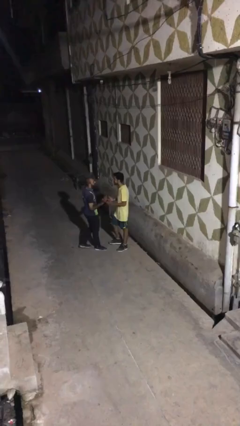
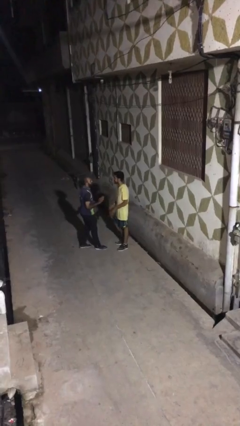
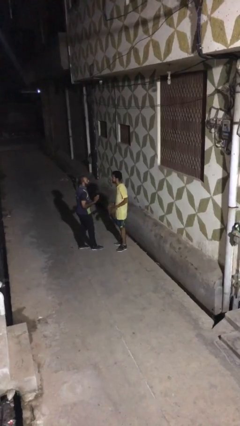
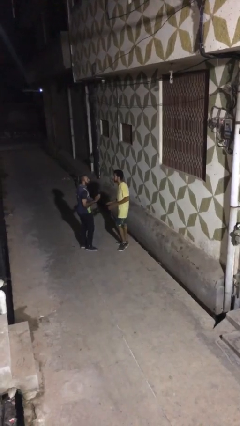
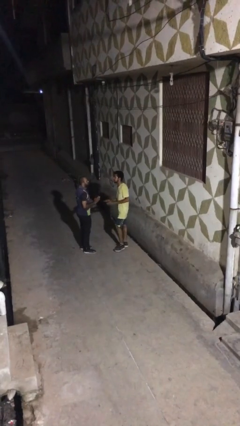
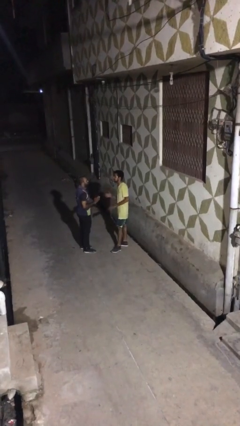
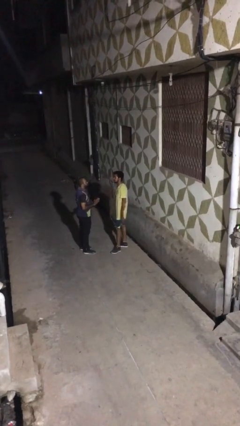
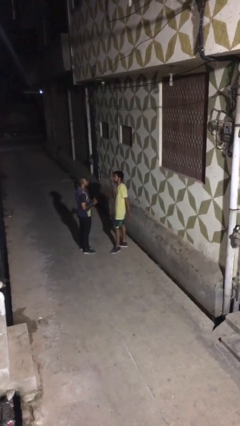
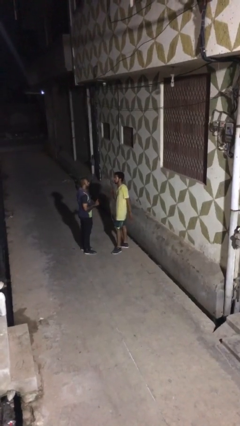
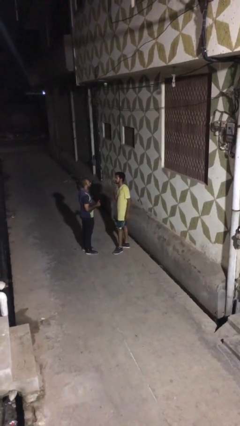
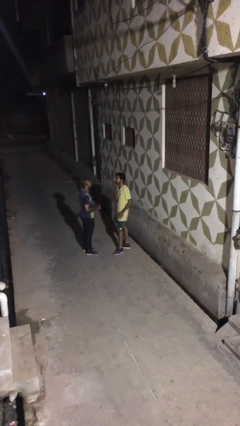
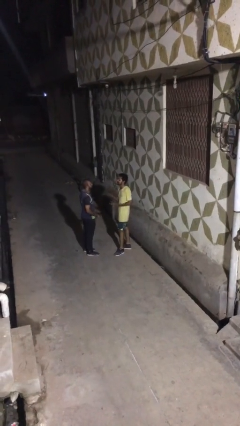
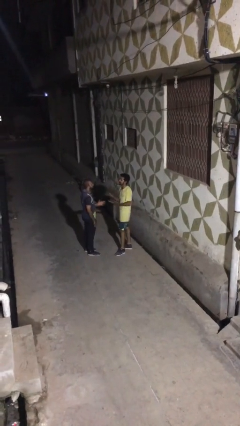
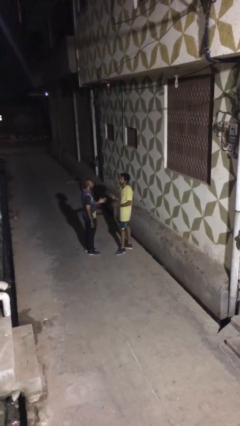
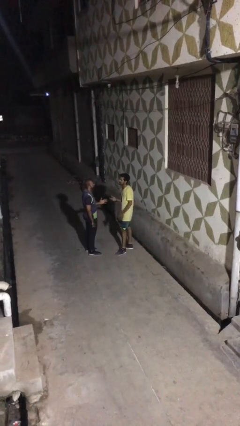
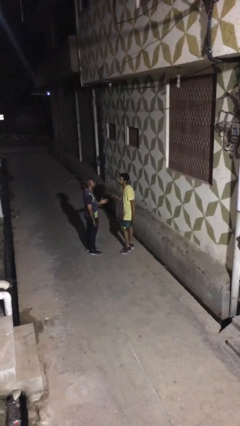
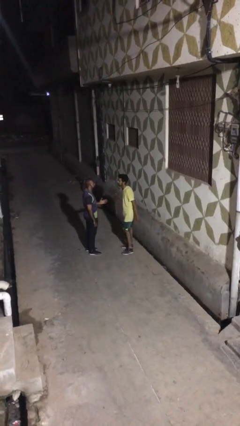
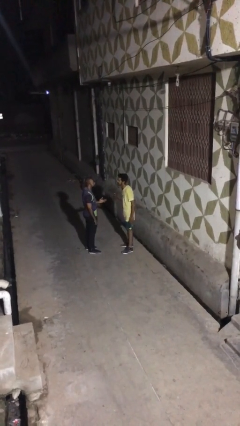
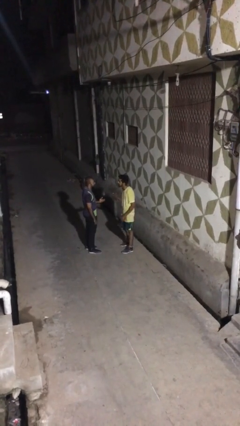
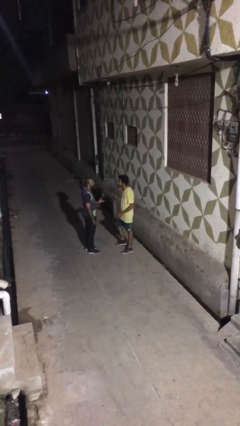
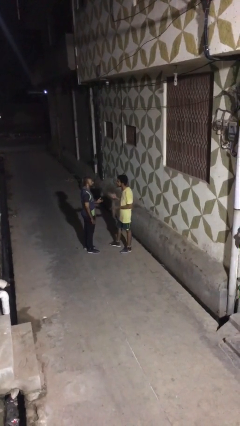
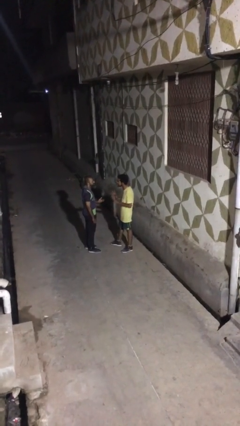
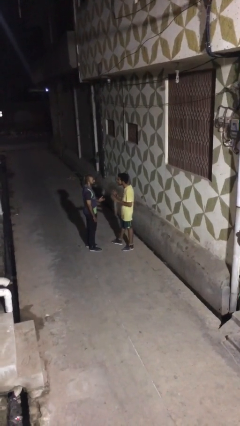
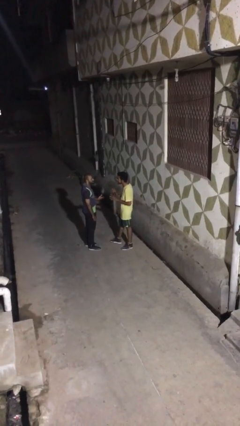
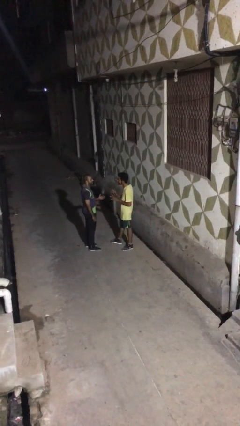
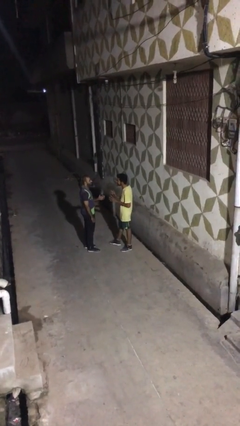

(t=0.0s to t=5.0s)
person talks to person

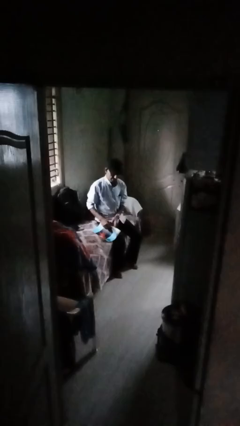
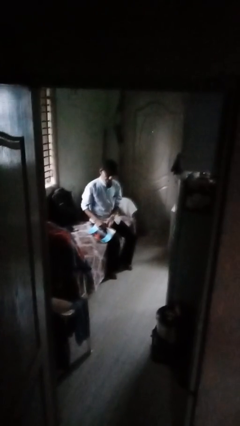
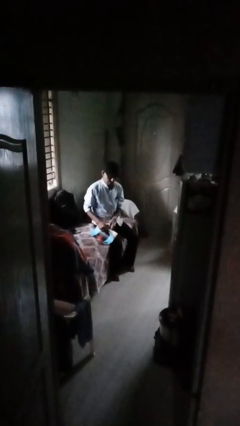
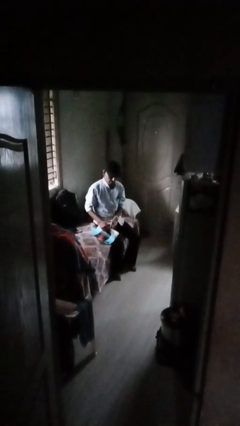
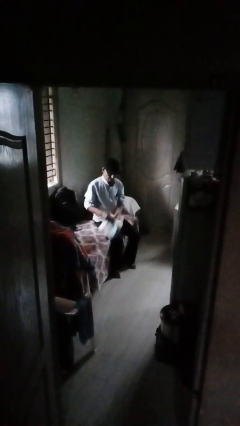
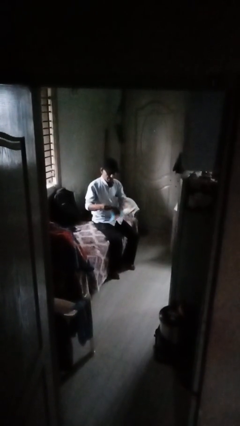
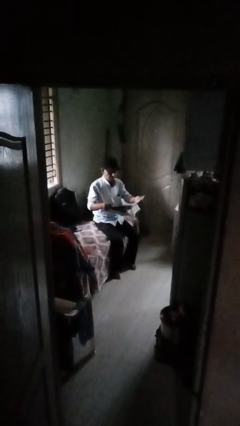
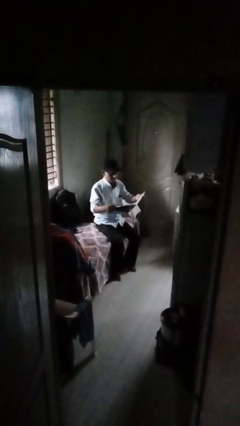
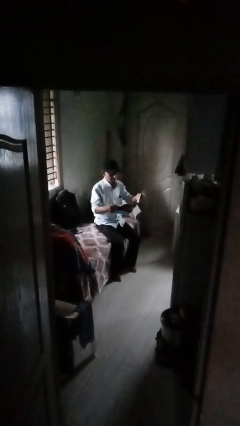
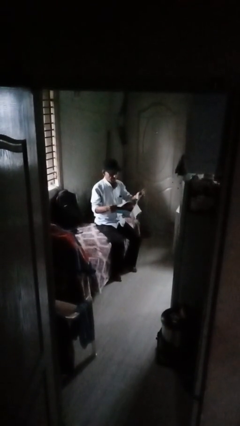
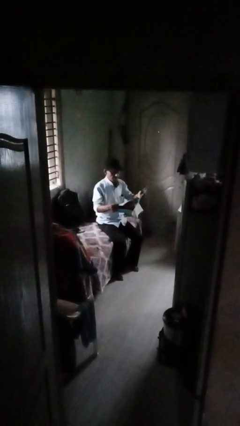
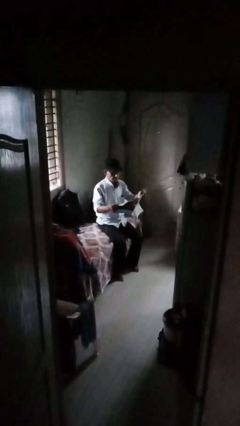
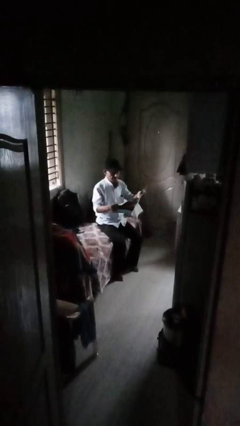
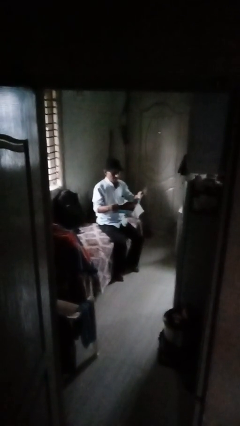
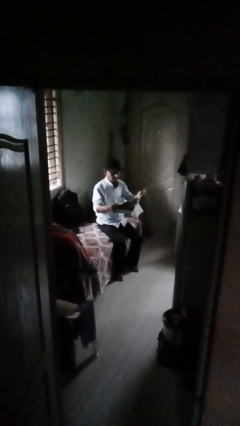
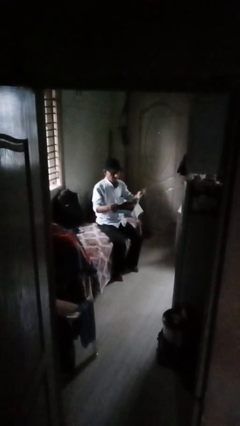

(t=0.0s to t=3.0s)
person reads magazine

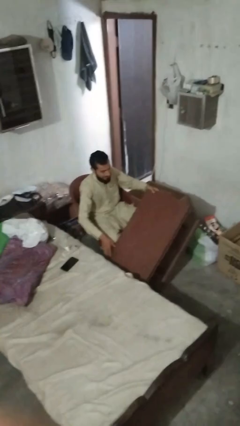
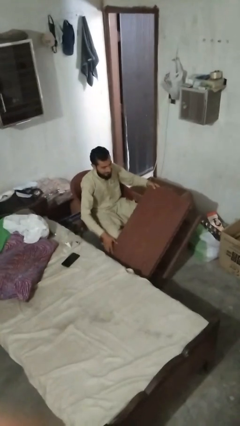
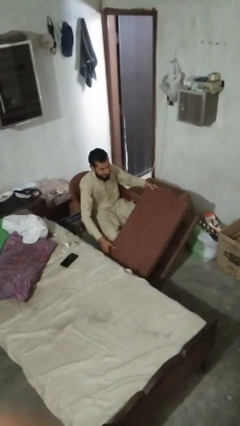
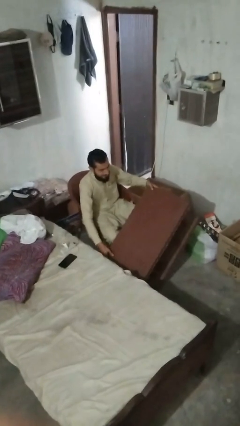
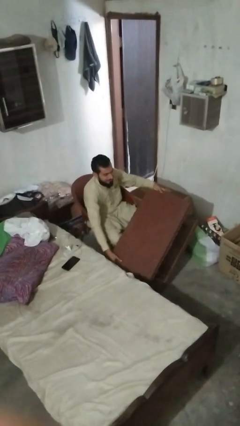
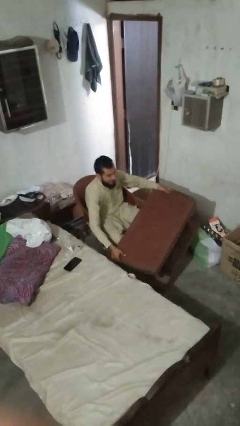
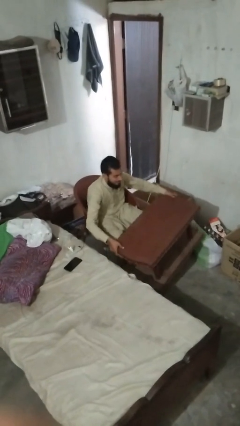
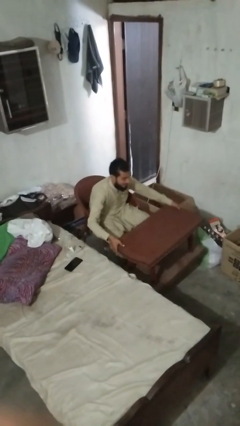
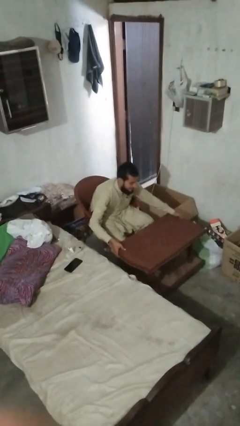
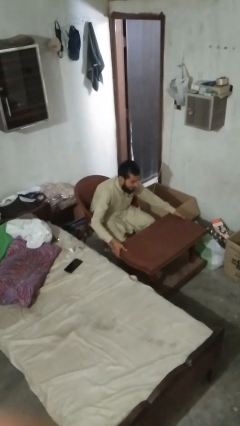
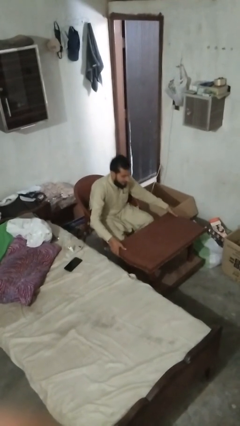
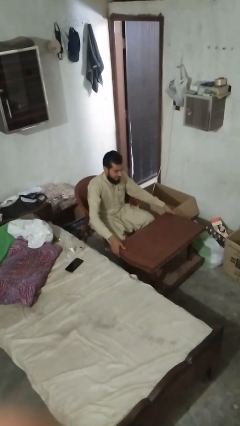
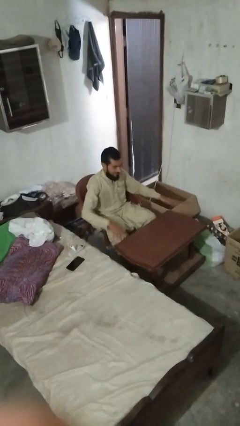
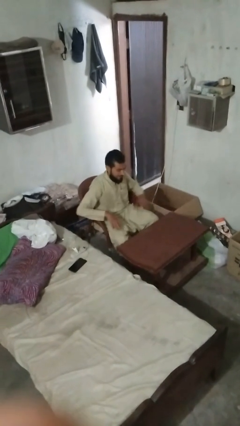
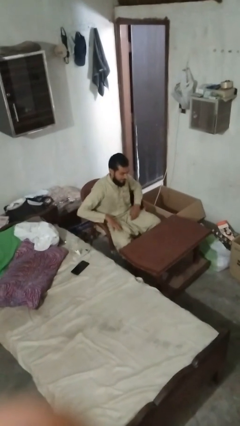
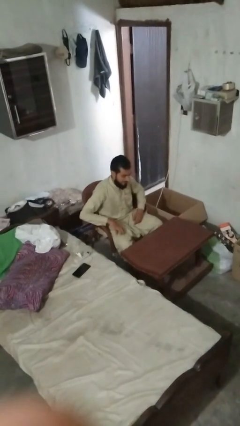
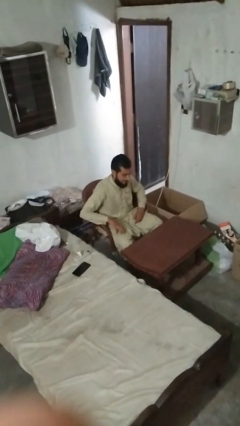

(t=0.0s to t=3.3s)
person sets upright furniture

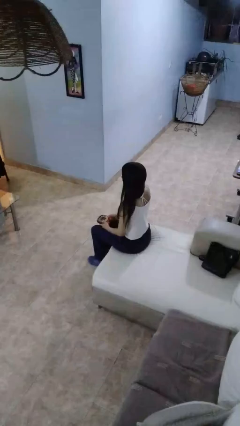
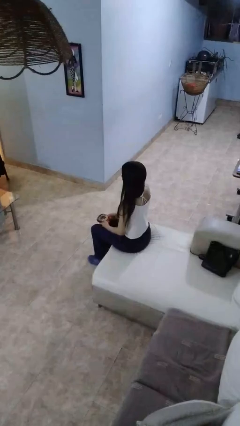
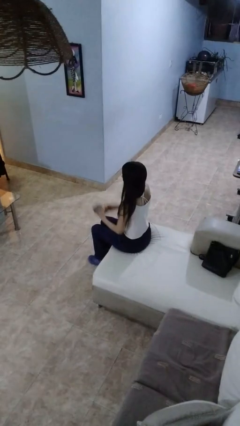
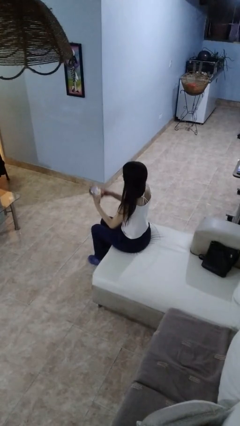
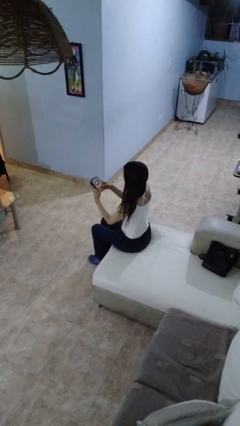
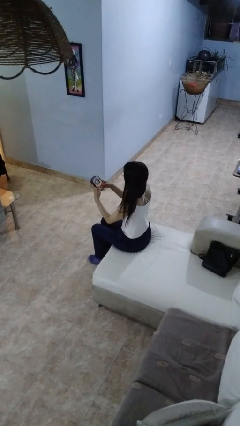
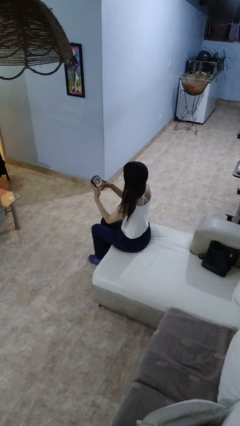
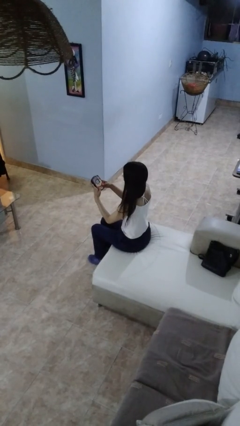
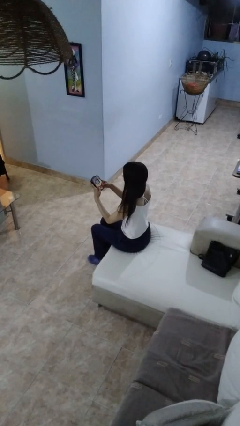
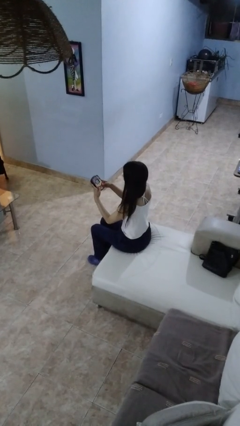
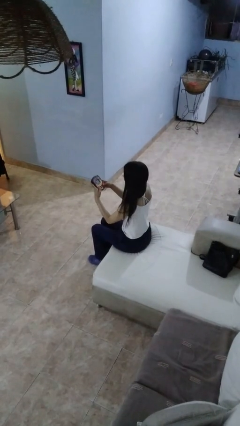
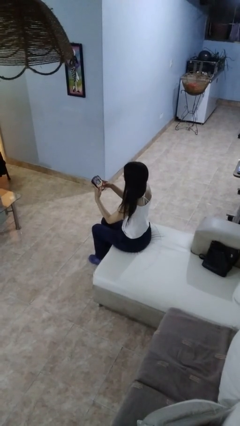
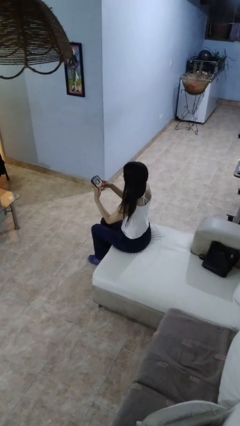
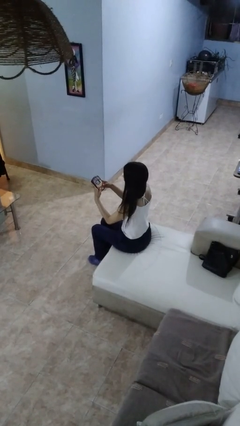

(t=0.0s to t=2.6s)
person interacts with handheld game

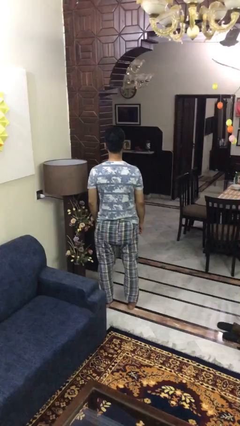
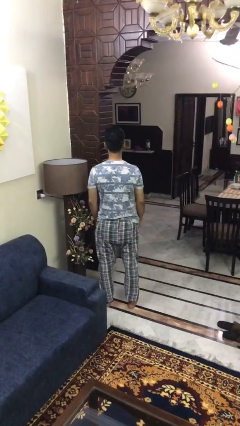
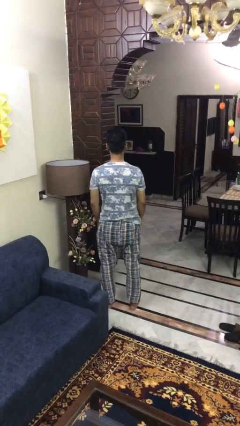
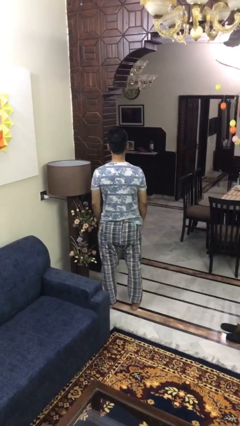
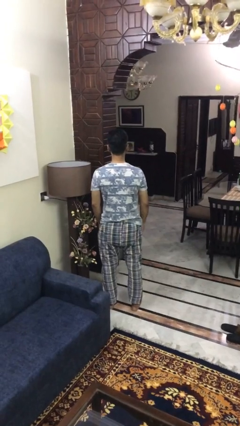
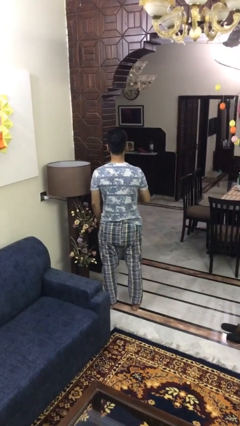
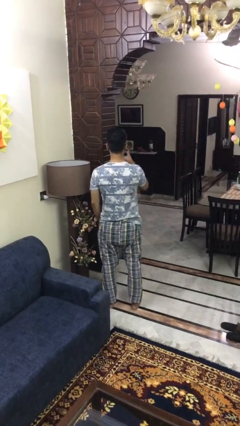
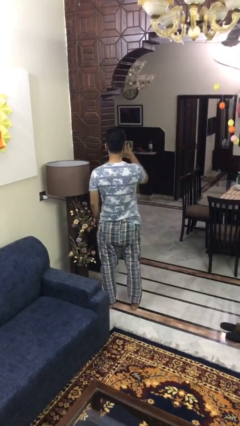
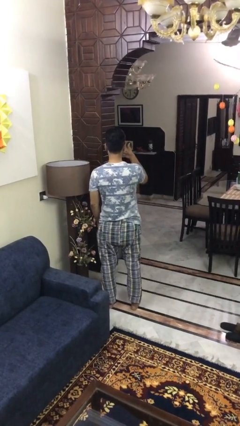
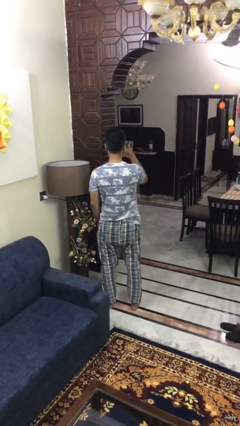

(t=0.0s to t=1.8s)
person gestures thumbs up

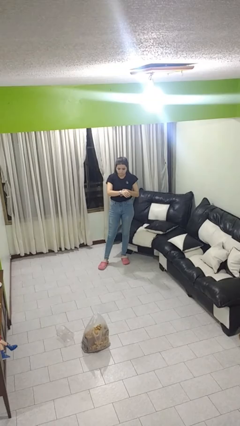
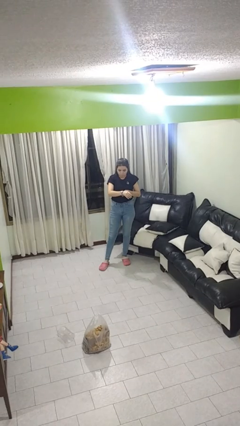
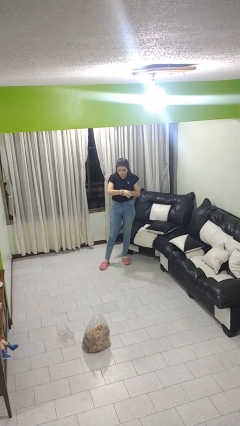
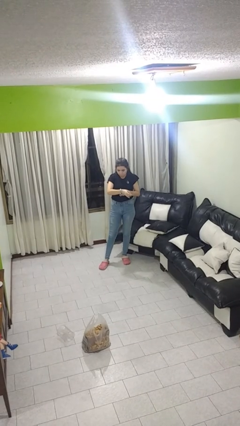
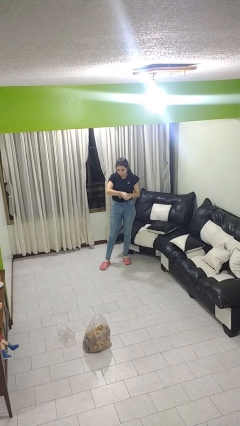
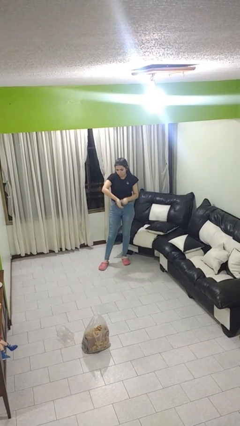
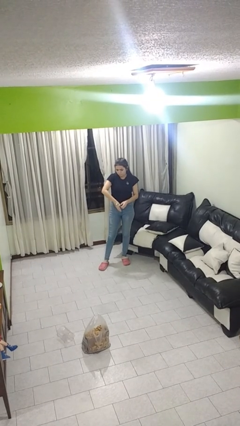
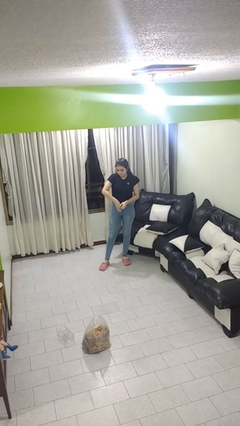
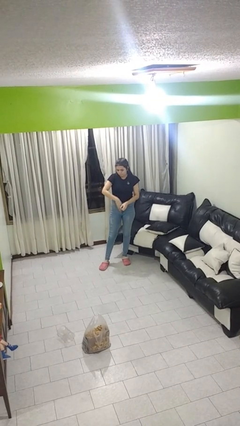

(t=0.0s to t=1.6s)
person takes off wristwatch
